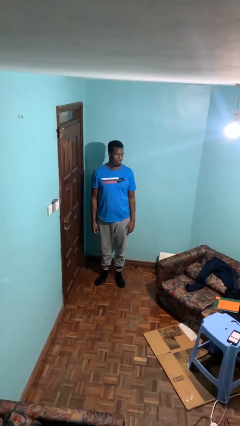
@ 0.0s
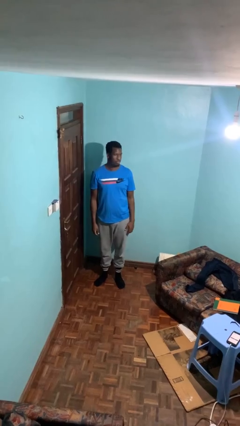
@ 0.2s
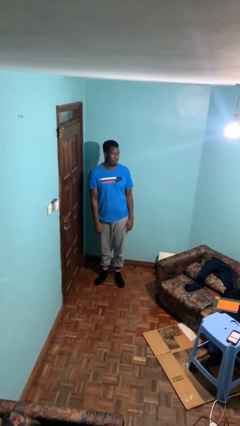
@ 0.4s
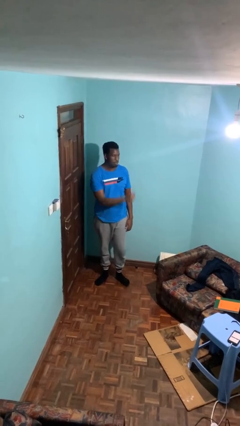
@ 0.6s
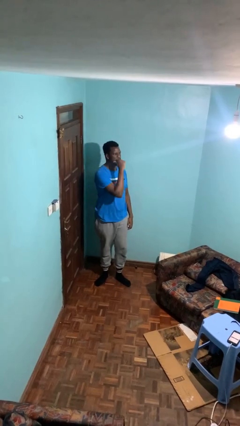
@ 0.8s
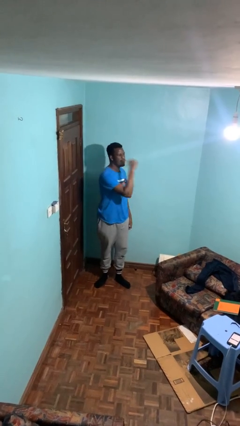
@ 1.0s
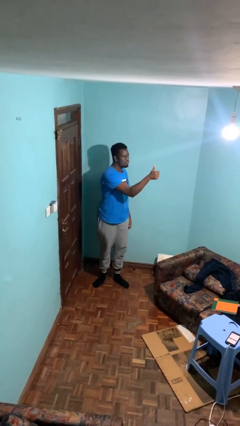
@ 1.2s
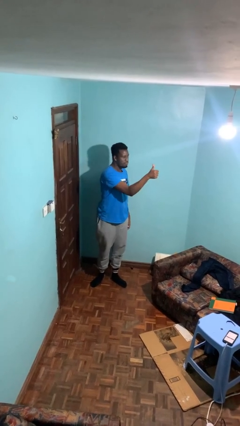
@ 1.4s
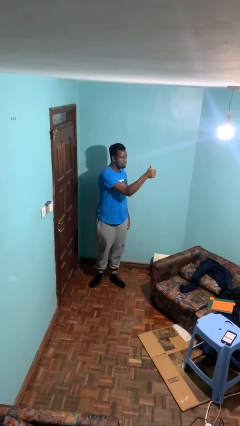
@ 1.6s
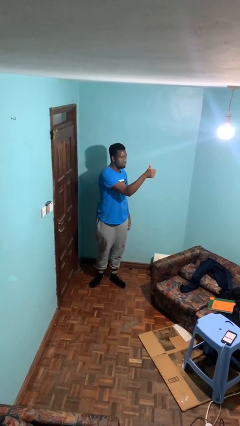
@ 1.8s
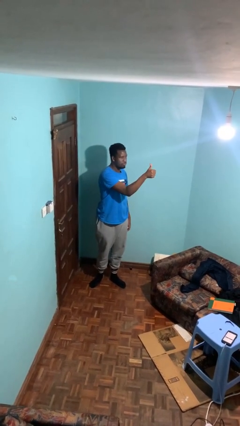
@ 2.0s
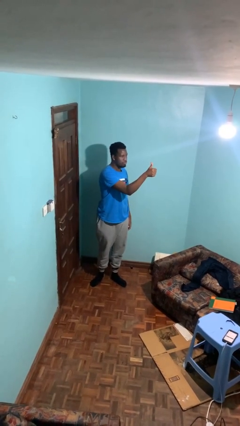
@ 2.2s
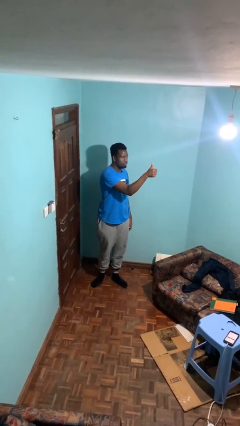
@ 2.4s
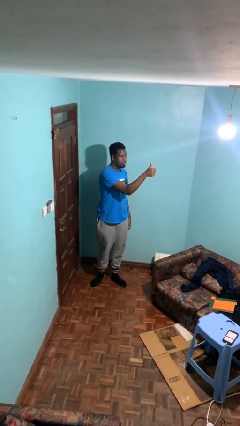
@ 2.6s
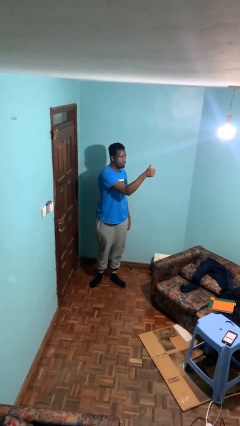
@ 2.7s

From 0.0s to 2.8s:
person gestures thumbs up

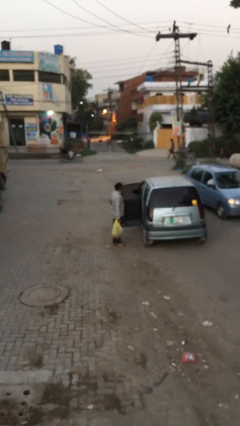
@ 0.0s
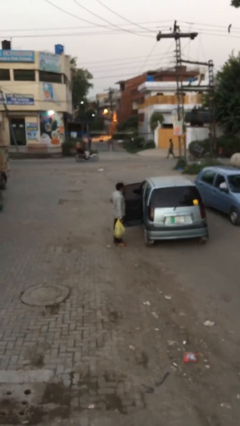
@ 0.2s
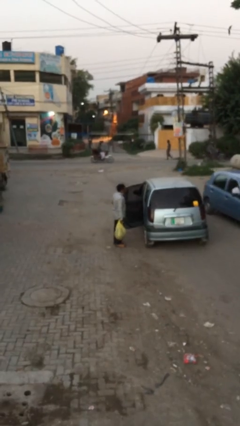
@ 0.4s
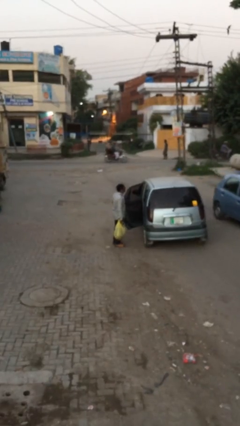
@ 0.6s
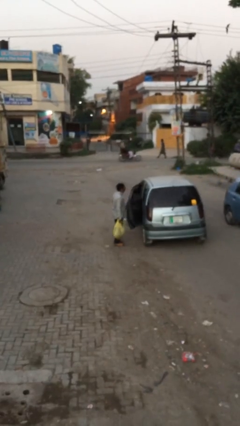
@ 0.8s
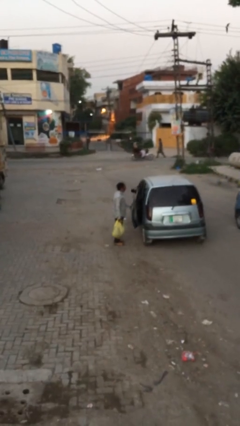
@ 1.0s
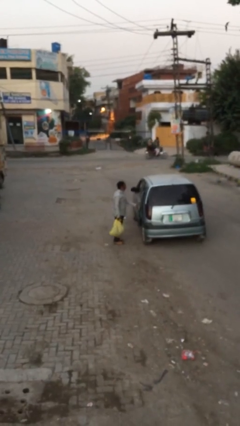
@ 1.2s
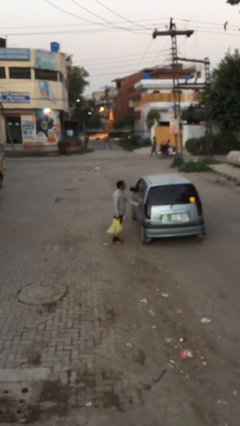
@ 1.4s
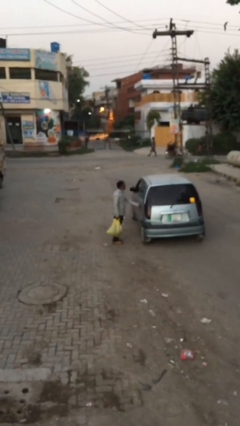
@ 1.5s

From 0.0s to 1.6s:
person closes car door

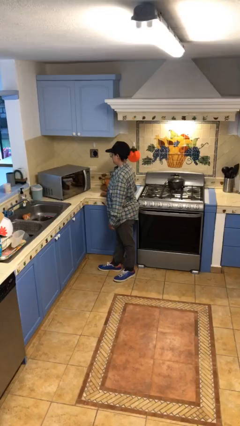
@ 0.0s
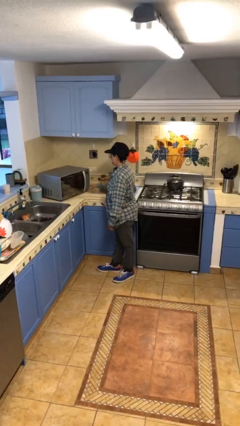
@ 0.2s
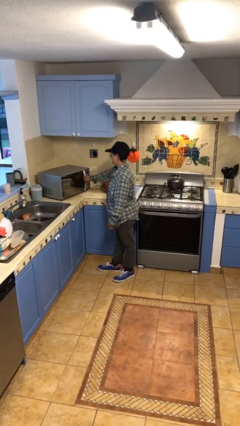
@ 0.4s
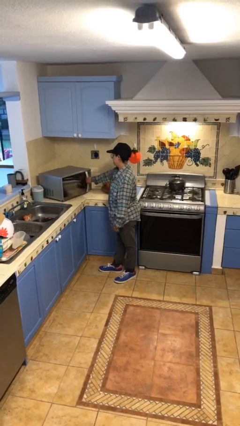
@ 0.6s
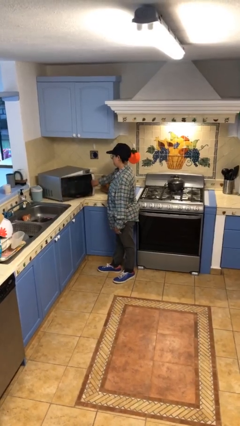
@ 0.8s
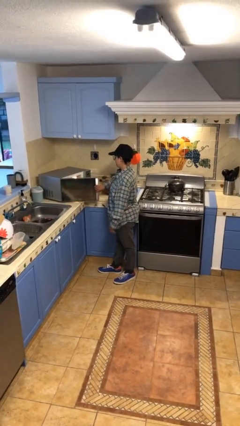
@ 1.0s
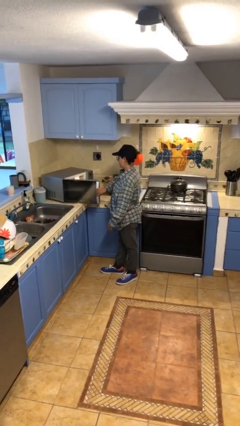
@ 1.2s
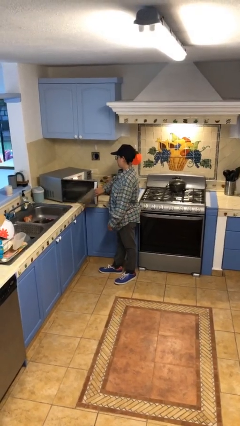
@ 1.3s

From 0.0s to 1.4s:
person opens microwave

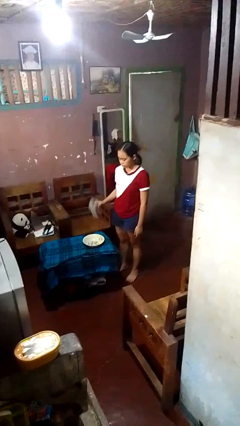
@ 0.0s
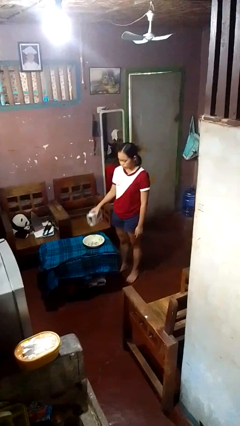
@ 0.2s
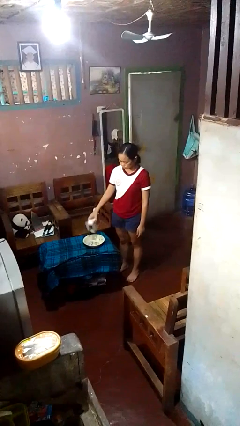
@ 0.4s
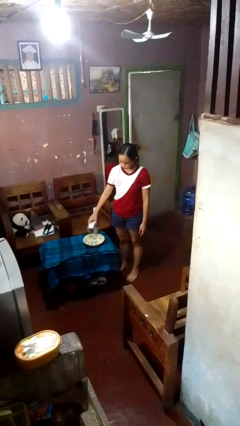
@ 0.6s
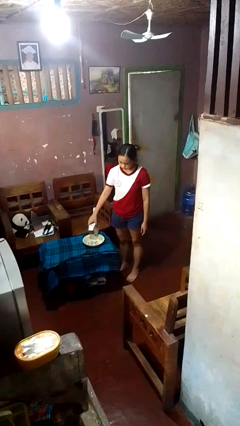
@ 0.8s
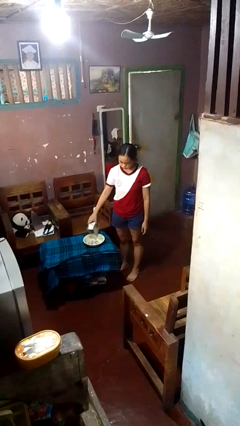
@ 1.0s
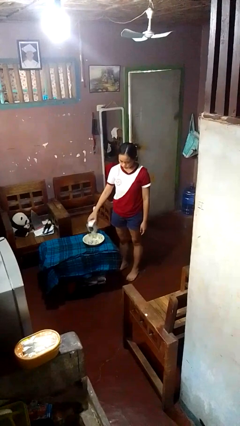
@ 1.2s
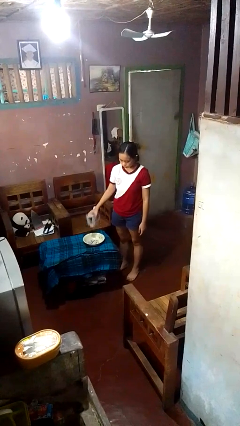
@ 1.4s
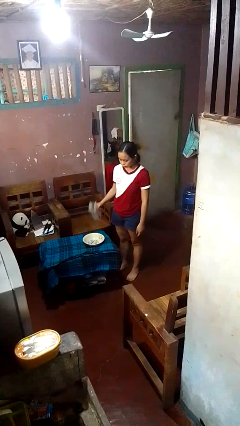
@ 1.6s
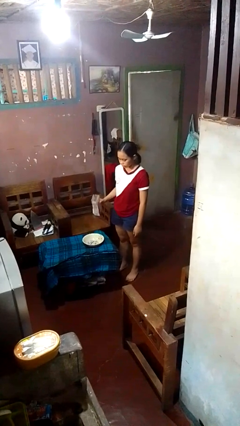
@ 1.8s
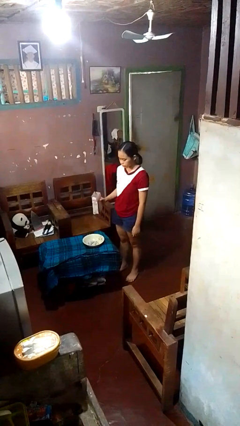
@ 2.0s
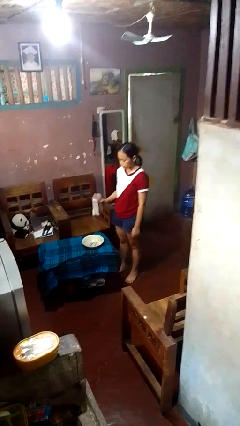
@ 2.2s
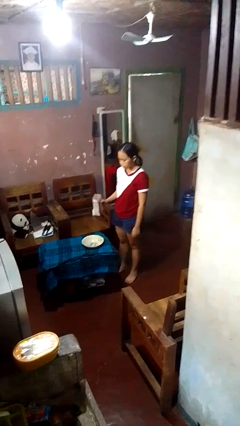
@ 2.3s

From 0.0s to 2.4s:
person pours into bowl

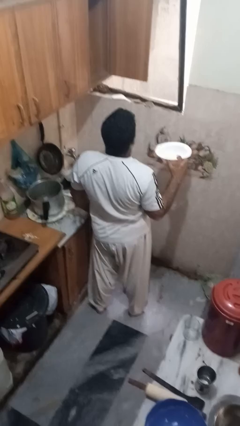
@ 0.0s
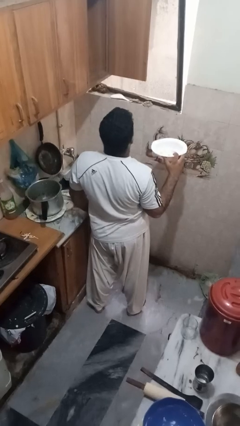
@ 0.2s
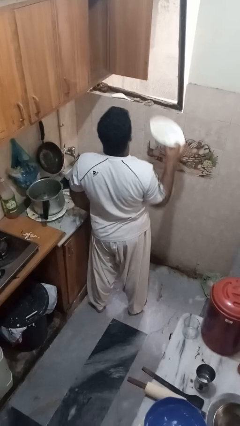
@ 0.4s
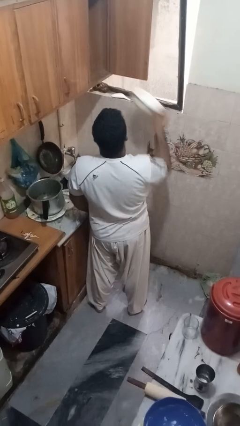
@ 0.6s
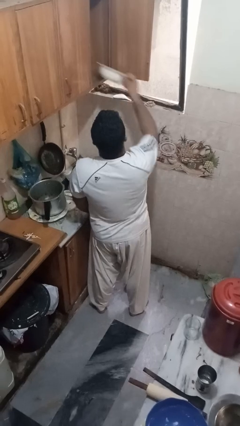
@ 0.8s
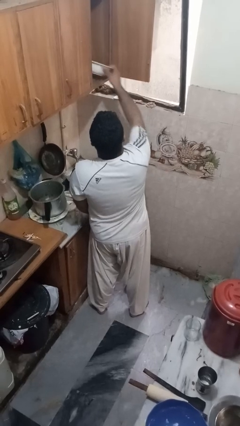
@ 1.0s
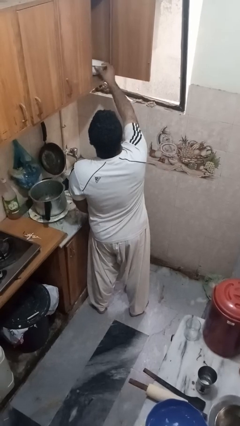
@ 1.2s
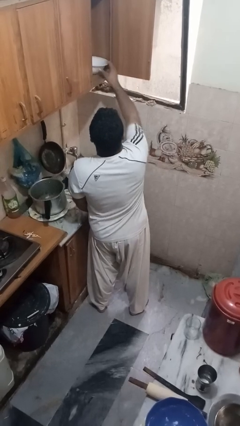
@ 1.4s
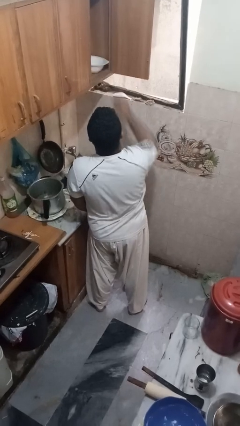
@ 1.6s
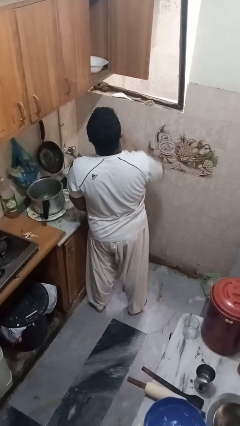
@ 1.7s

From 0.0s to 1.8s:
person puts object in cabinet

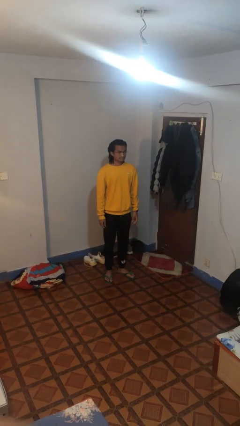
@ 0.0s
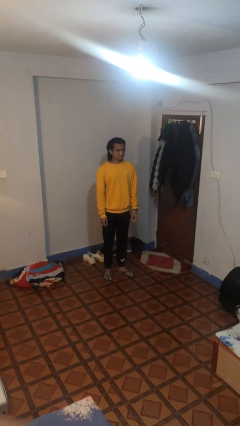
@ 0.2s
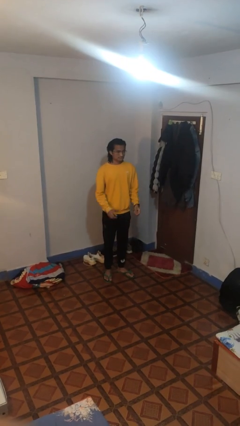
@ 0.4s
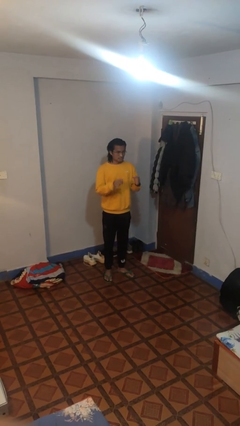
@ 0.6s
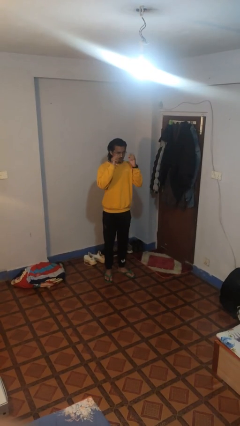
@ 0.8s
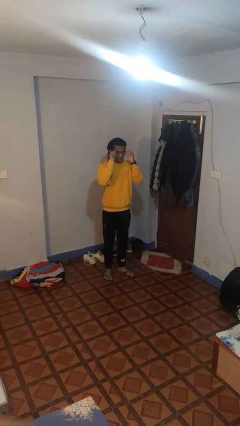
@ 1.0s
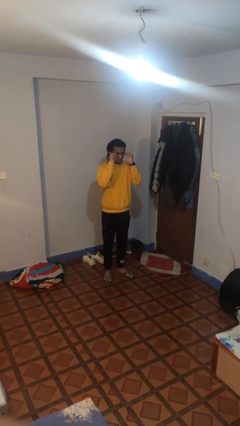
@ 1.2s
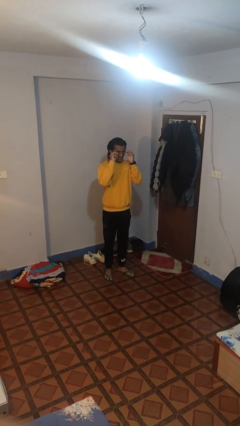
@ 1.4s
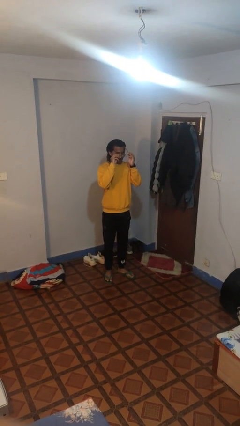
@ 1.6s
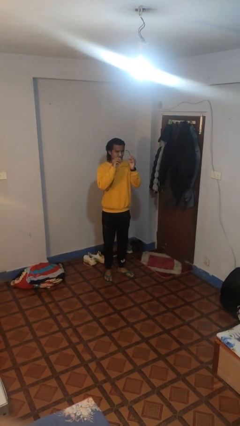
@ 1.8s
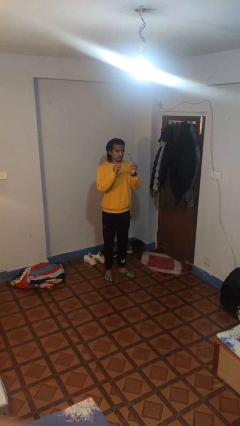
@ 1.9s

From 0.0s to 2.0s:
person takes off glasses

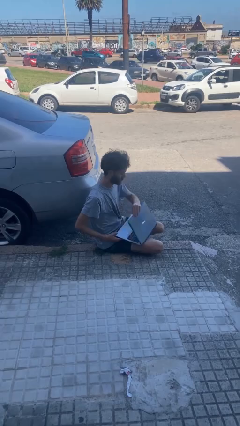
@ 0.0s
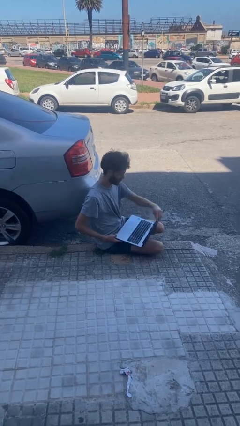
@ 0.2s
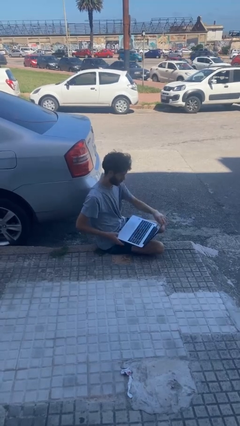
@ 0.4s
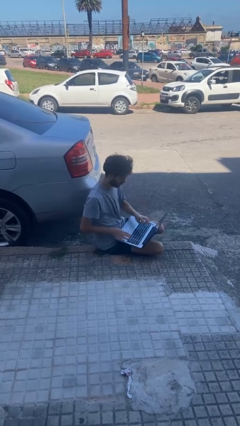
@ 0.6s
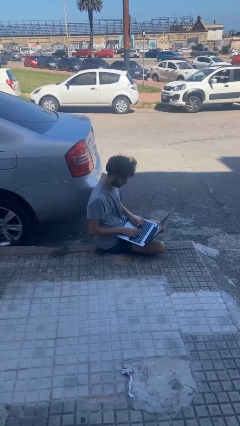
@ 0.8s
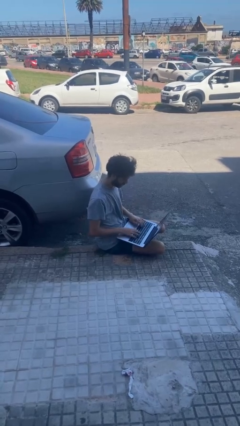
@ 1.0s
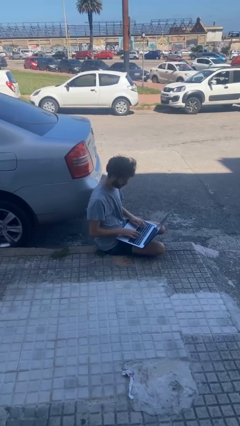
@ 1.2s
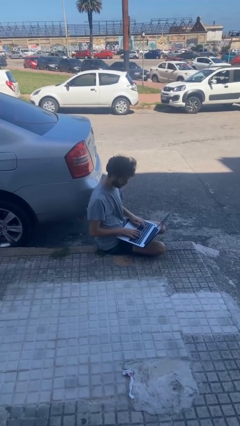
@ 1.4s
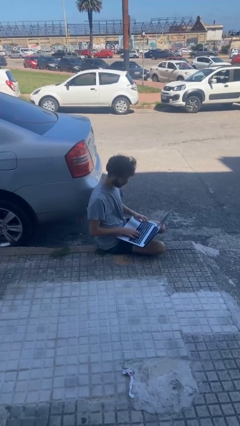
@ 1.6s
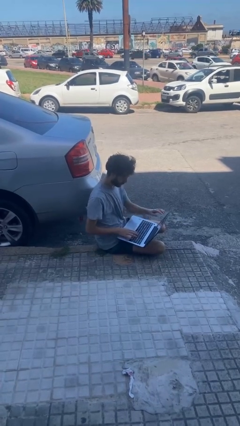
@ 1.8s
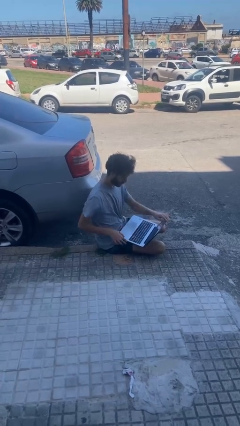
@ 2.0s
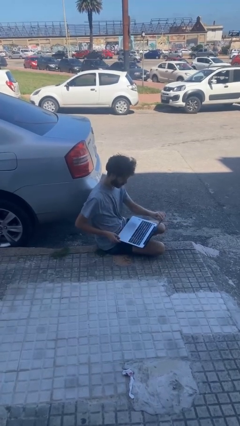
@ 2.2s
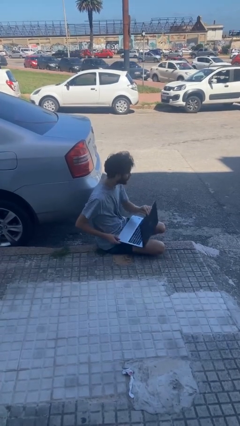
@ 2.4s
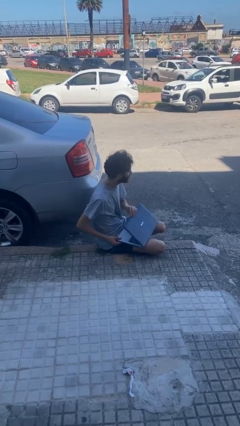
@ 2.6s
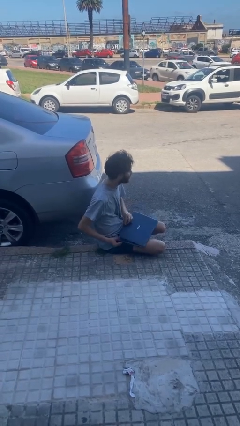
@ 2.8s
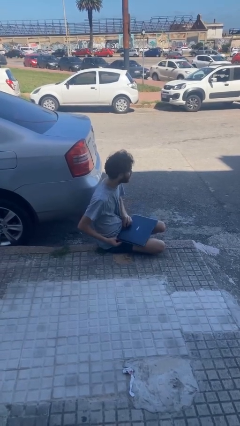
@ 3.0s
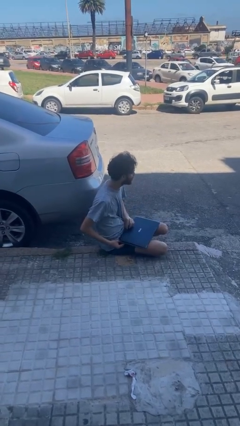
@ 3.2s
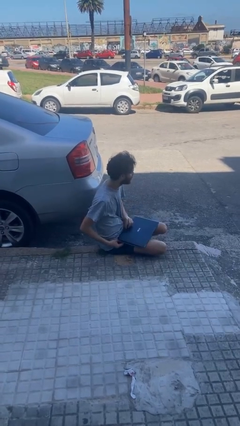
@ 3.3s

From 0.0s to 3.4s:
person interacts with laptop

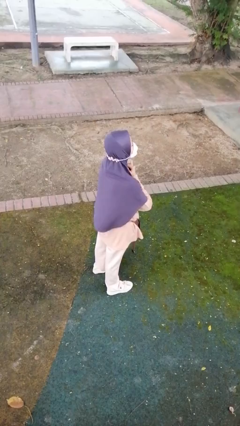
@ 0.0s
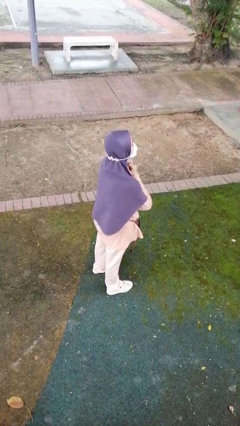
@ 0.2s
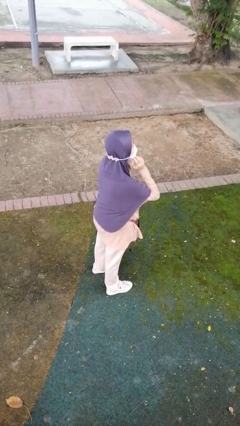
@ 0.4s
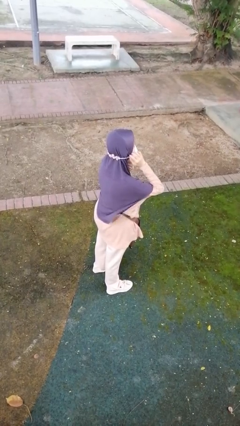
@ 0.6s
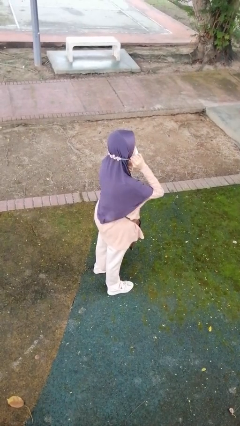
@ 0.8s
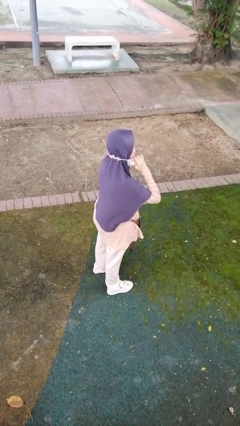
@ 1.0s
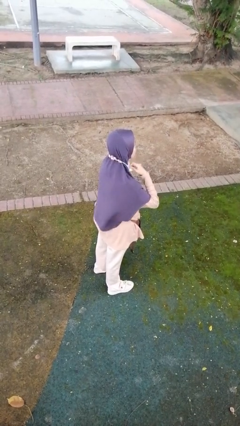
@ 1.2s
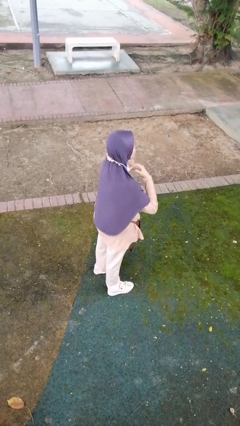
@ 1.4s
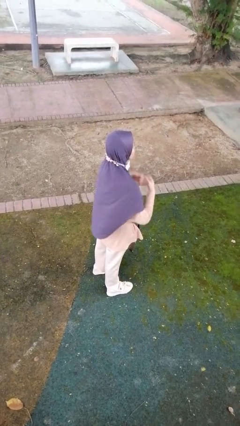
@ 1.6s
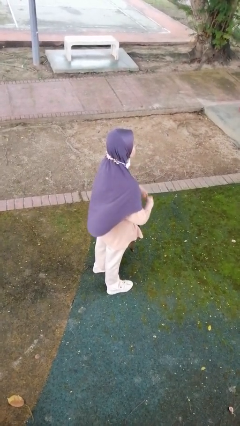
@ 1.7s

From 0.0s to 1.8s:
person takes off facemask
